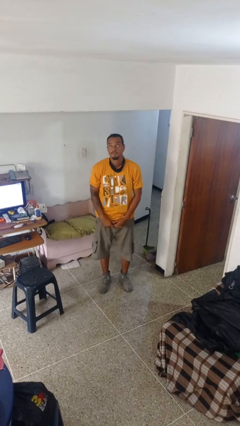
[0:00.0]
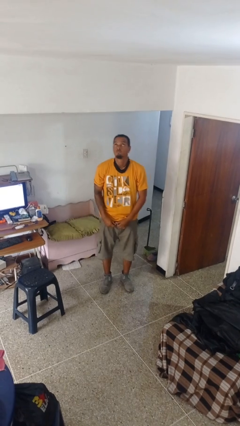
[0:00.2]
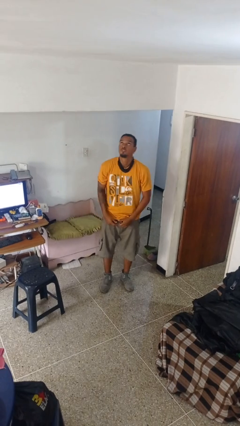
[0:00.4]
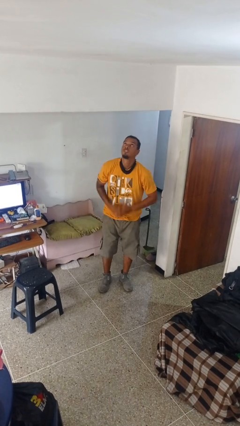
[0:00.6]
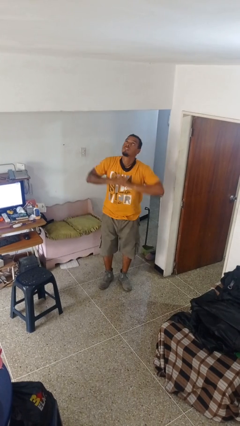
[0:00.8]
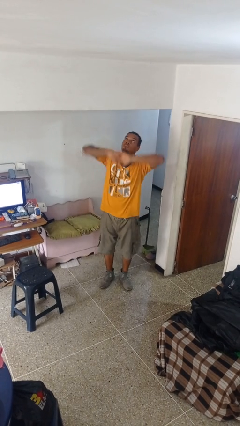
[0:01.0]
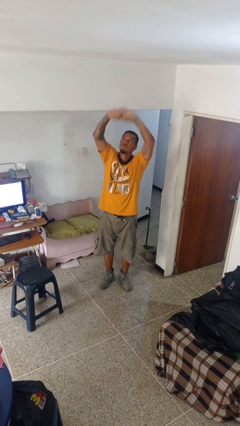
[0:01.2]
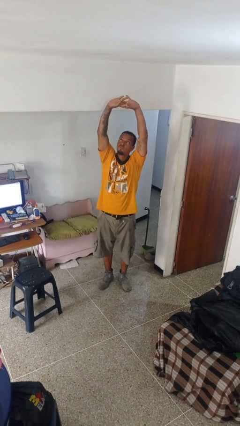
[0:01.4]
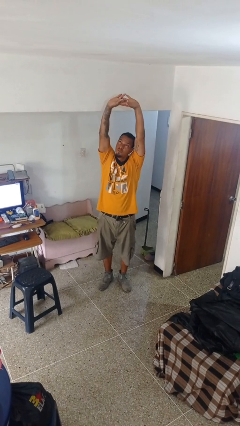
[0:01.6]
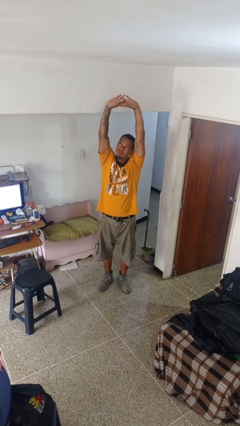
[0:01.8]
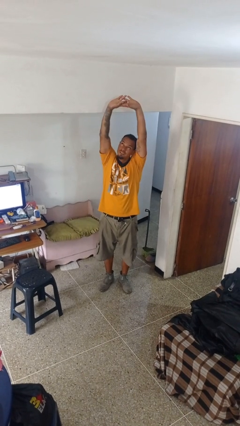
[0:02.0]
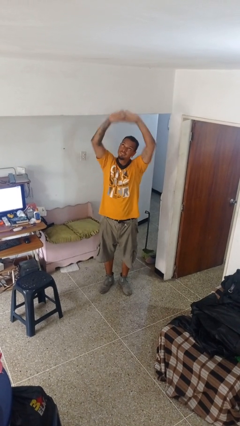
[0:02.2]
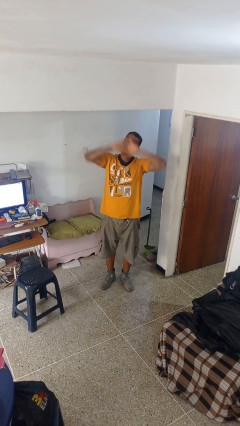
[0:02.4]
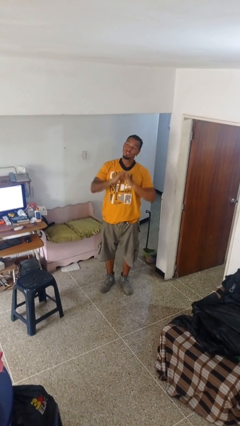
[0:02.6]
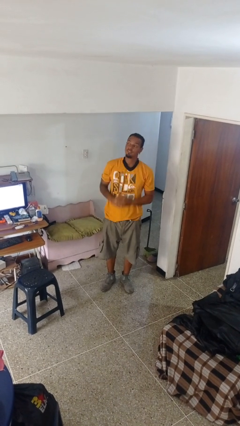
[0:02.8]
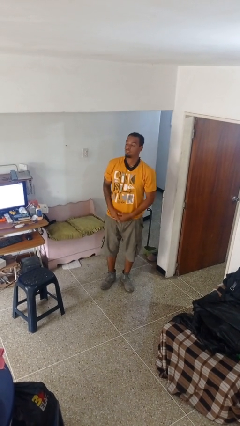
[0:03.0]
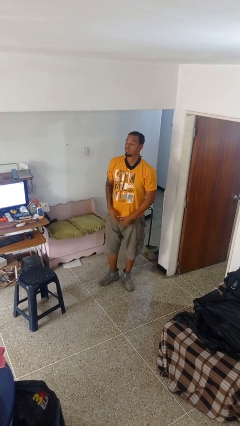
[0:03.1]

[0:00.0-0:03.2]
person stretches arms over head

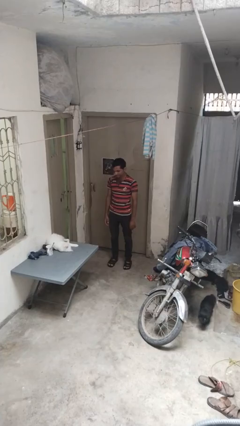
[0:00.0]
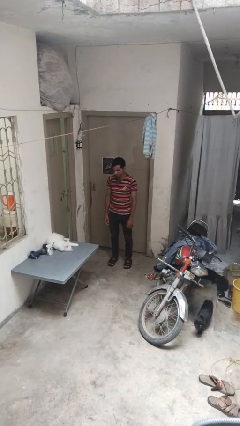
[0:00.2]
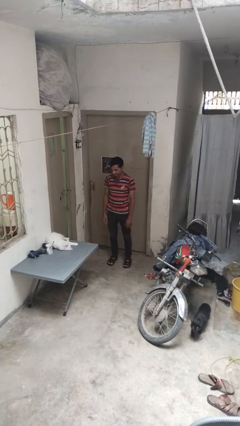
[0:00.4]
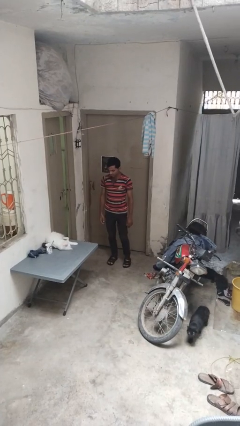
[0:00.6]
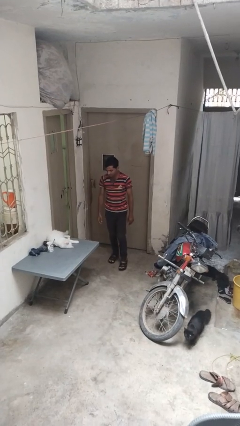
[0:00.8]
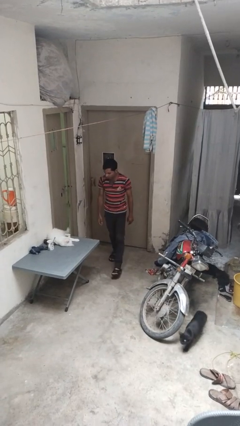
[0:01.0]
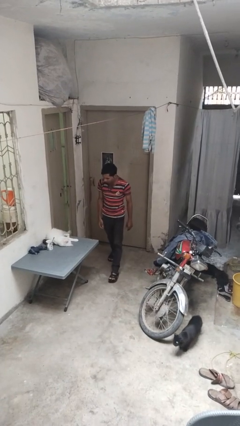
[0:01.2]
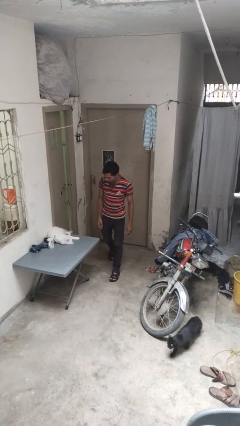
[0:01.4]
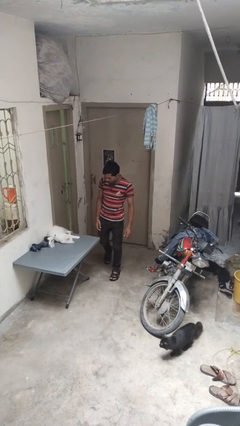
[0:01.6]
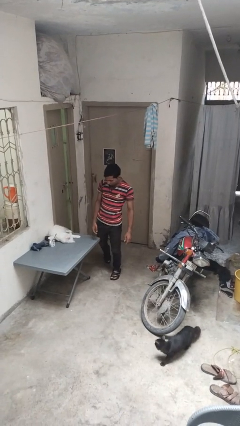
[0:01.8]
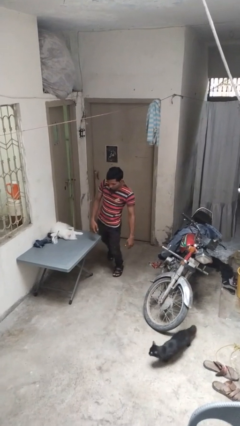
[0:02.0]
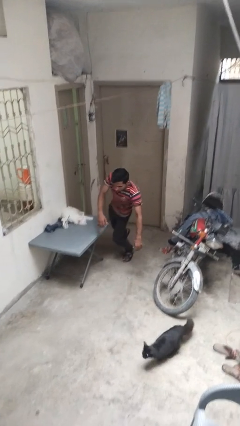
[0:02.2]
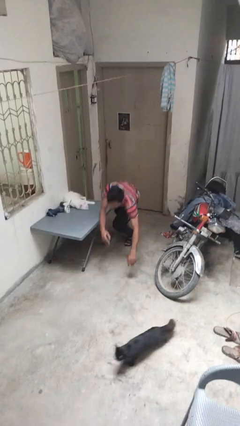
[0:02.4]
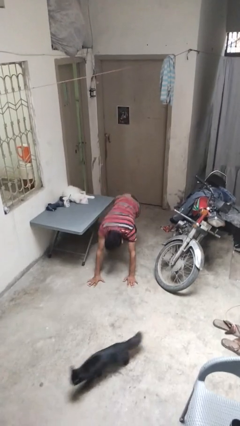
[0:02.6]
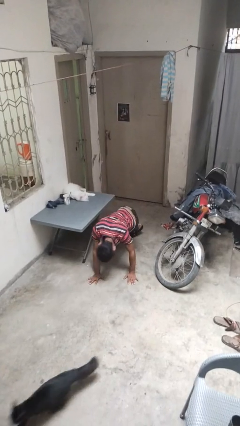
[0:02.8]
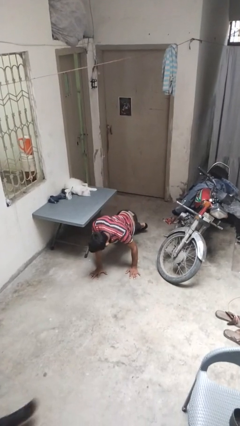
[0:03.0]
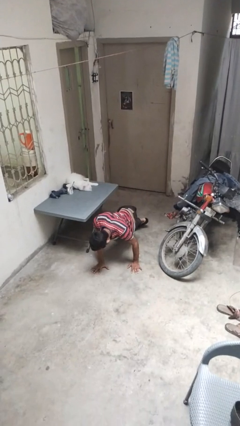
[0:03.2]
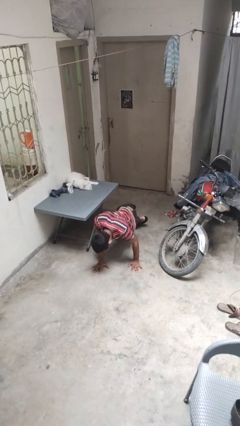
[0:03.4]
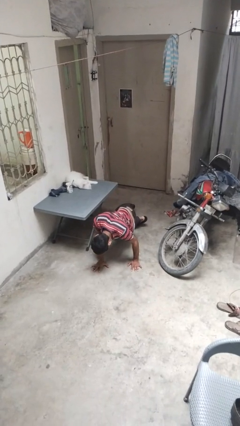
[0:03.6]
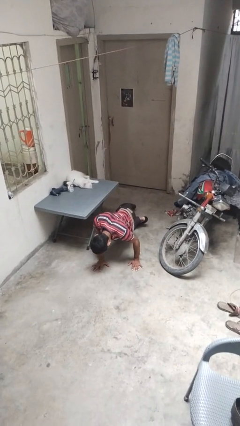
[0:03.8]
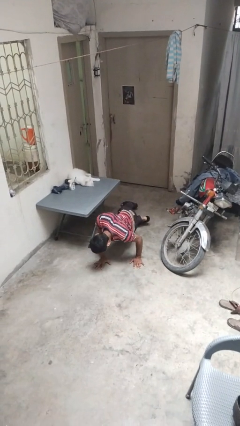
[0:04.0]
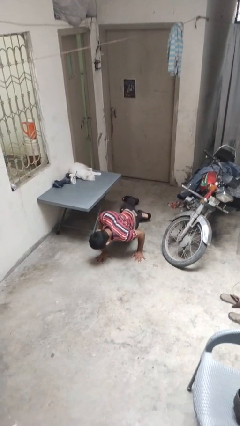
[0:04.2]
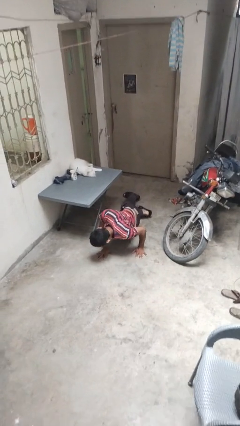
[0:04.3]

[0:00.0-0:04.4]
person trips on object on floor

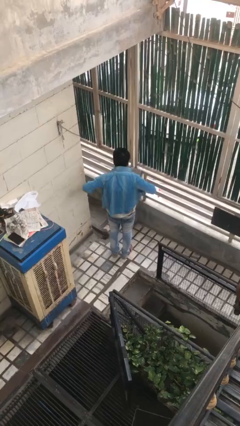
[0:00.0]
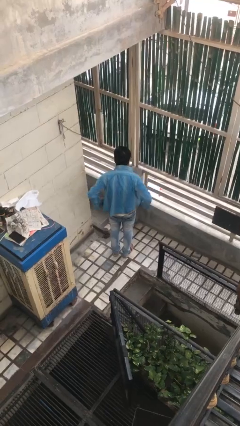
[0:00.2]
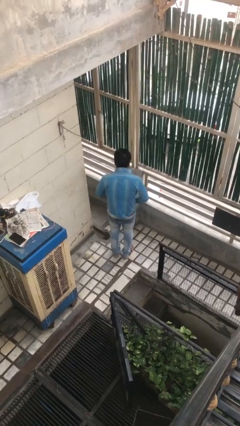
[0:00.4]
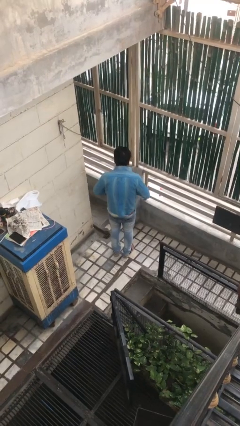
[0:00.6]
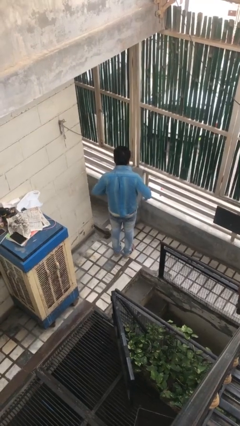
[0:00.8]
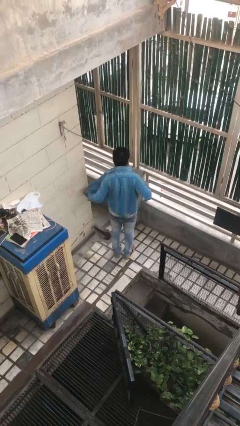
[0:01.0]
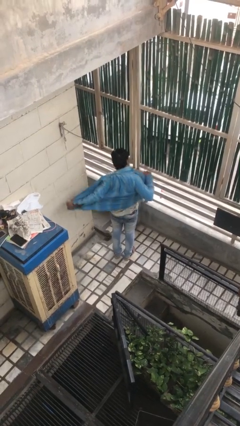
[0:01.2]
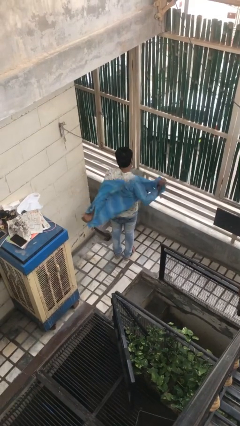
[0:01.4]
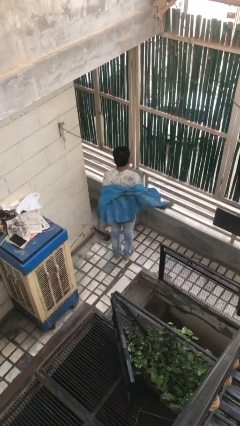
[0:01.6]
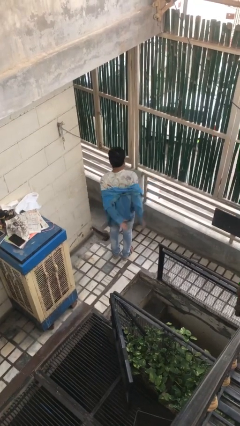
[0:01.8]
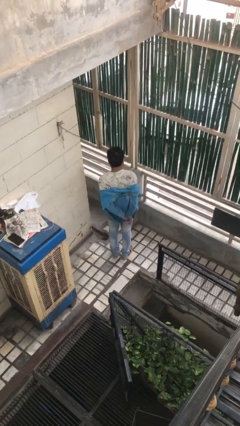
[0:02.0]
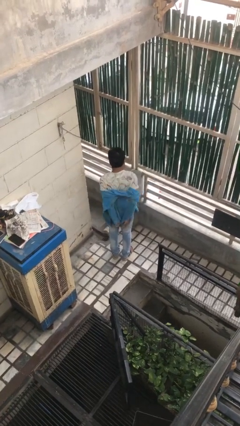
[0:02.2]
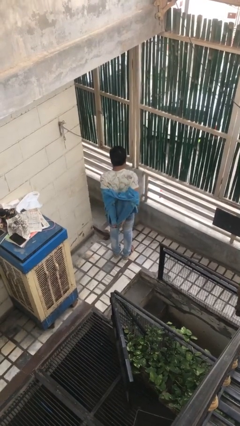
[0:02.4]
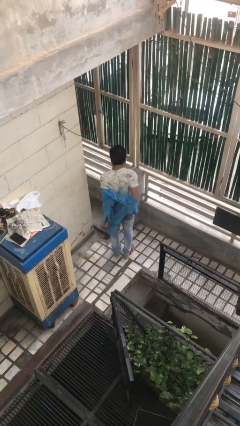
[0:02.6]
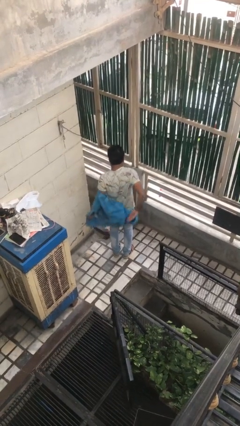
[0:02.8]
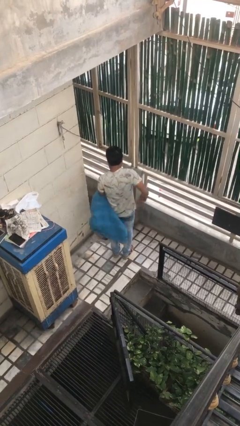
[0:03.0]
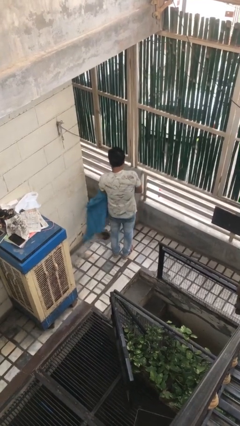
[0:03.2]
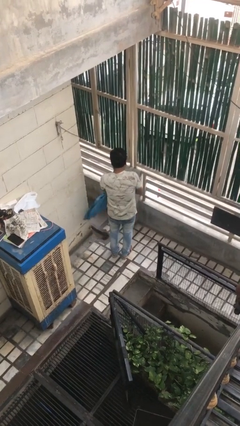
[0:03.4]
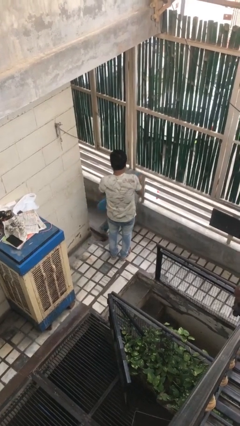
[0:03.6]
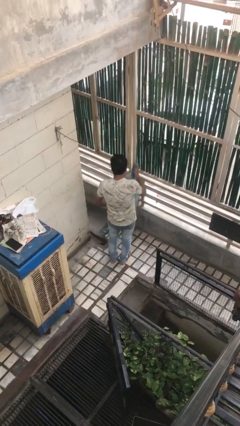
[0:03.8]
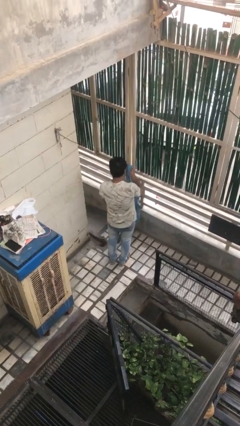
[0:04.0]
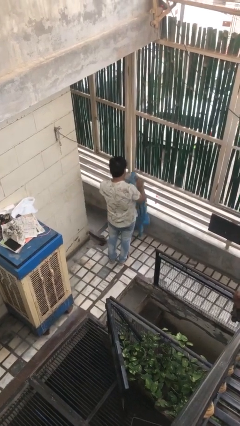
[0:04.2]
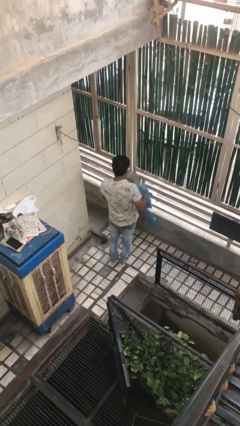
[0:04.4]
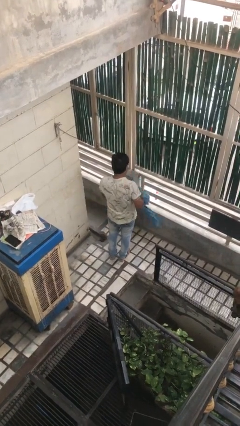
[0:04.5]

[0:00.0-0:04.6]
person takes off shirt

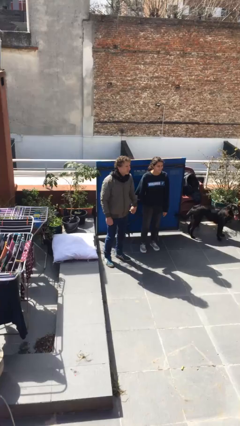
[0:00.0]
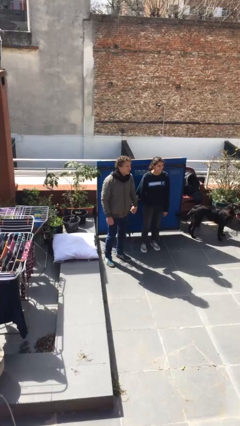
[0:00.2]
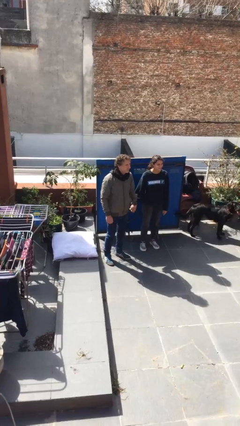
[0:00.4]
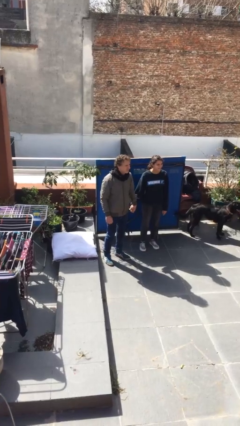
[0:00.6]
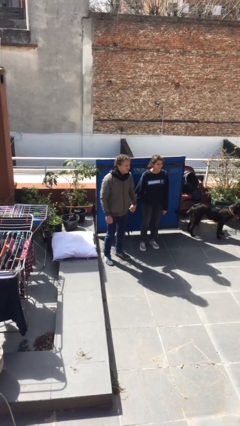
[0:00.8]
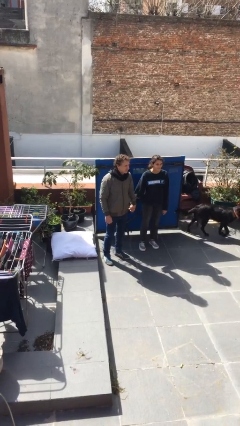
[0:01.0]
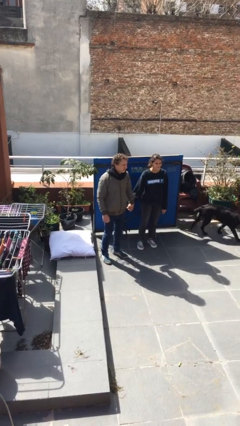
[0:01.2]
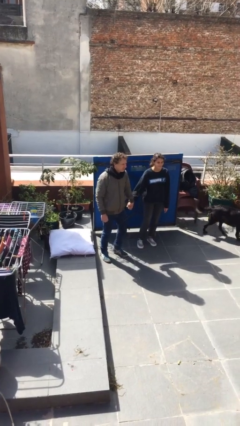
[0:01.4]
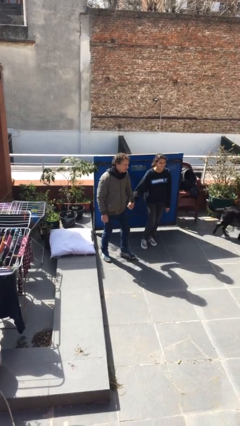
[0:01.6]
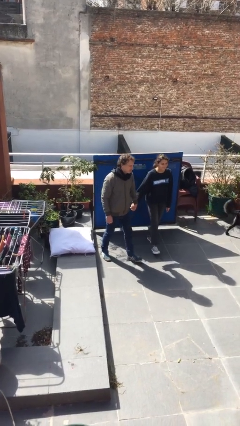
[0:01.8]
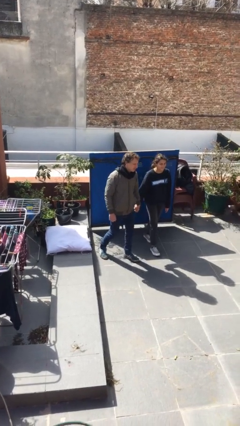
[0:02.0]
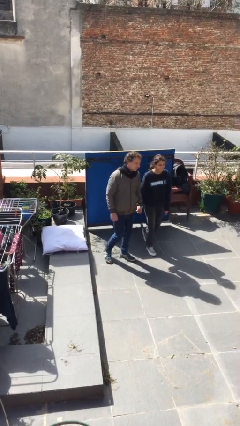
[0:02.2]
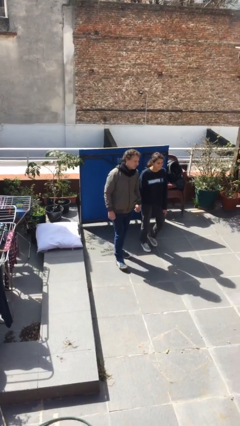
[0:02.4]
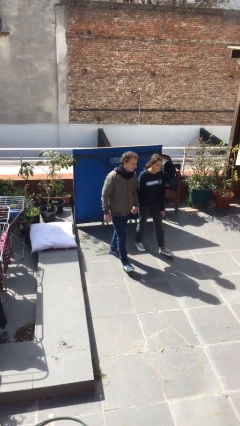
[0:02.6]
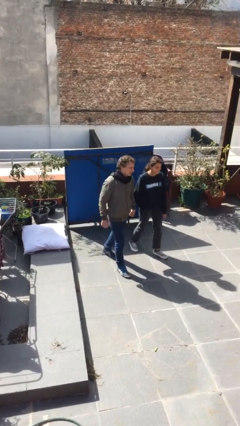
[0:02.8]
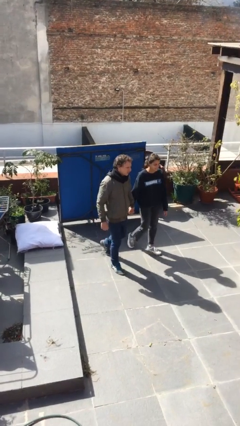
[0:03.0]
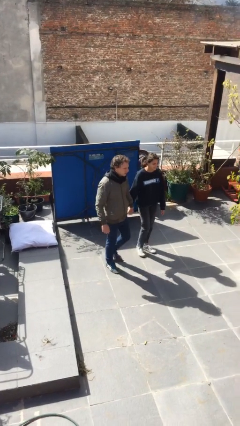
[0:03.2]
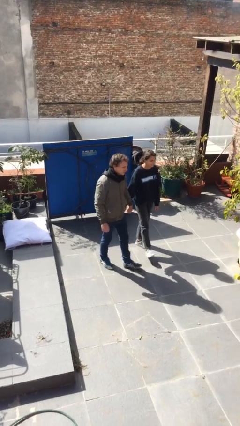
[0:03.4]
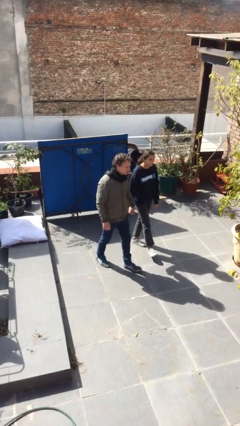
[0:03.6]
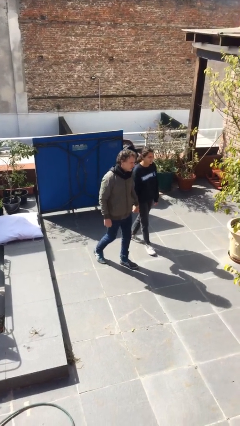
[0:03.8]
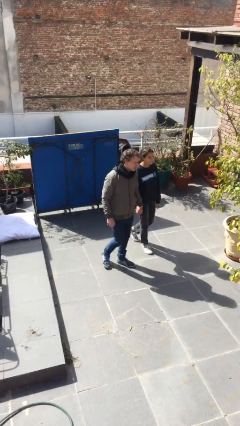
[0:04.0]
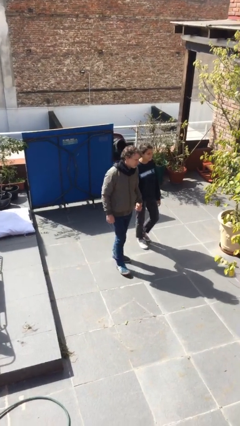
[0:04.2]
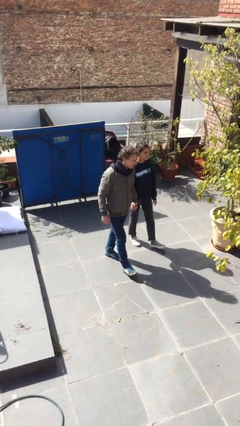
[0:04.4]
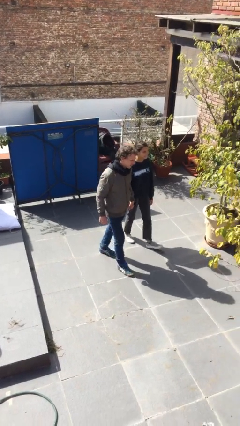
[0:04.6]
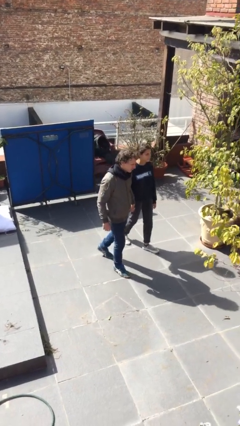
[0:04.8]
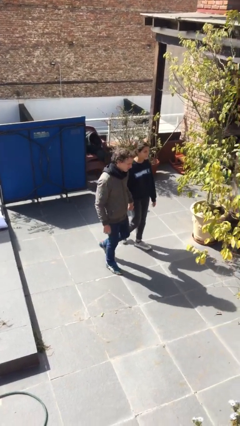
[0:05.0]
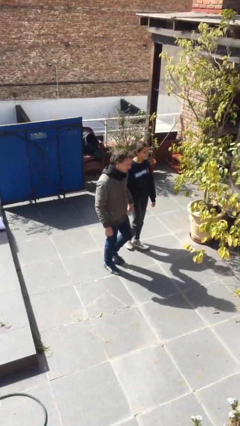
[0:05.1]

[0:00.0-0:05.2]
person holds hand

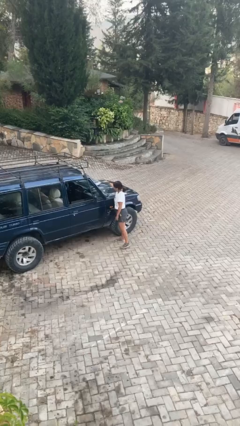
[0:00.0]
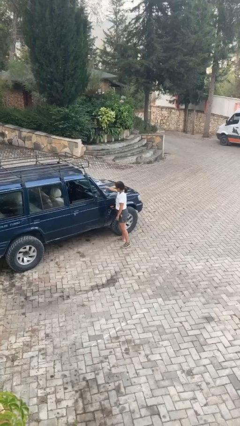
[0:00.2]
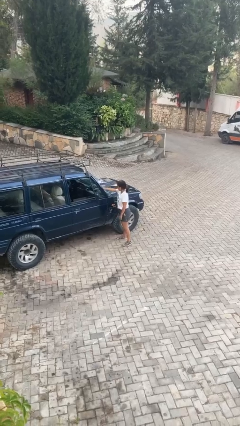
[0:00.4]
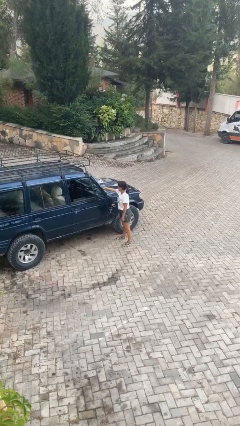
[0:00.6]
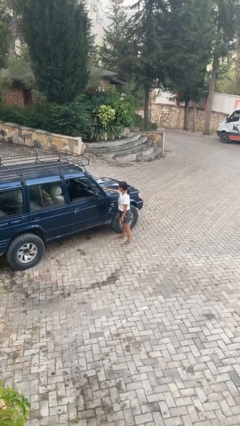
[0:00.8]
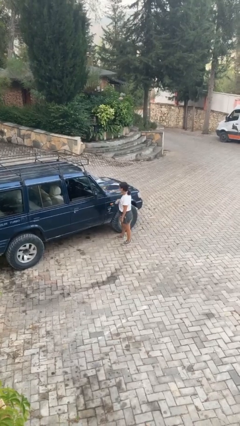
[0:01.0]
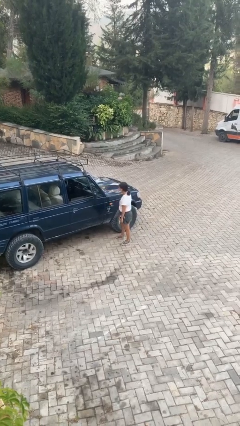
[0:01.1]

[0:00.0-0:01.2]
person flips down car wipers
